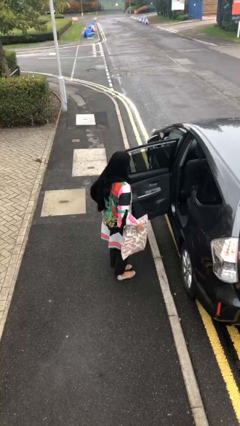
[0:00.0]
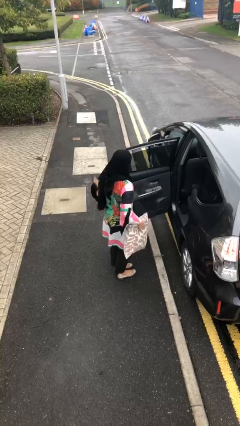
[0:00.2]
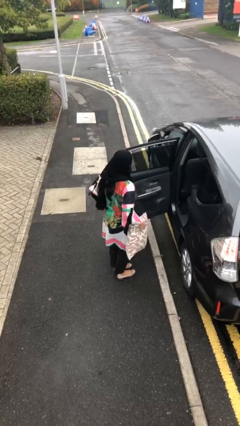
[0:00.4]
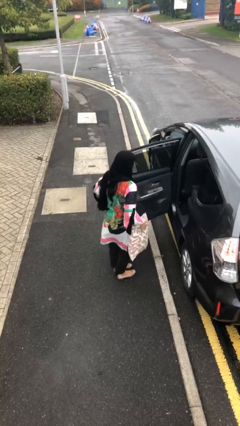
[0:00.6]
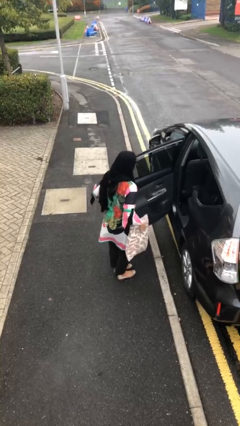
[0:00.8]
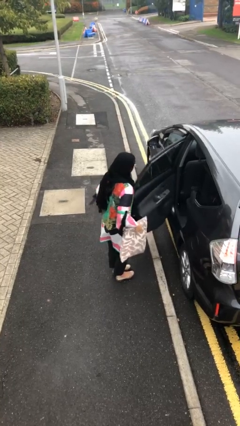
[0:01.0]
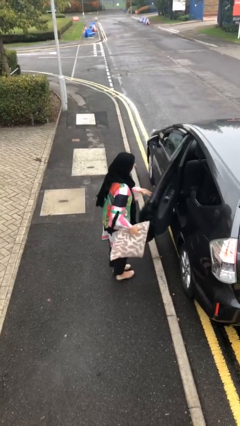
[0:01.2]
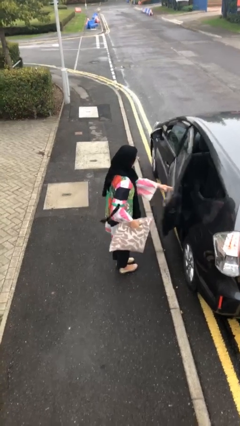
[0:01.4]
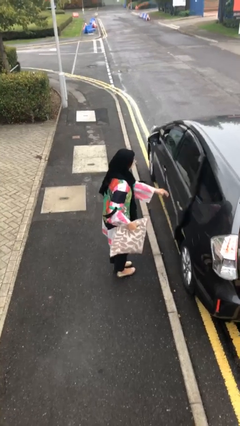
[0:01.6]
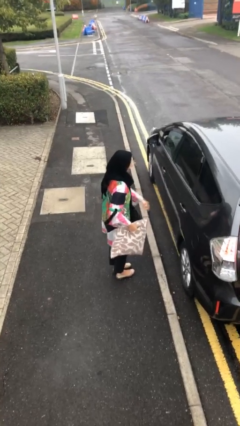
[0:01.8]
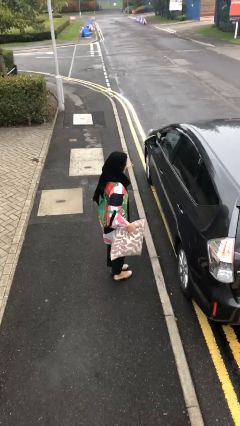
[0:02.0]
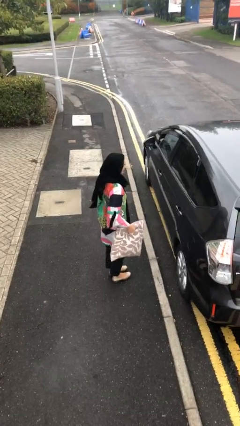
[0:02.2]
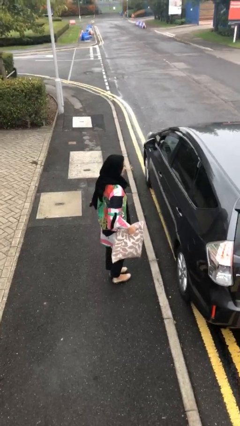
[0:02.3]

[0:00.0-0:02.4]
person closes car door

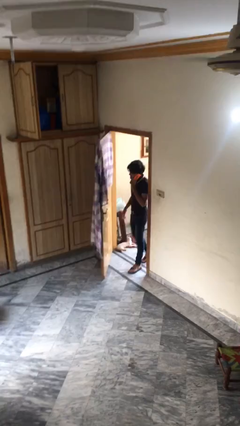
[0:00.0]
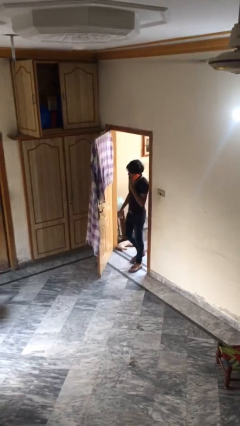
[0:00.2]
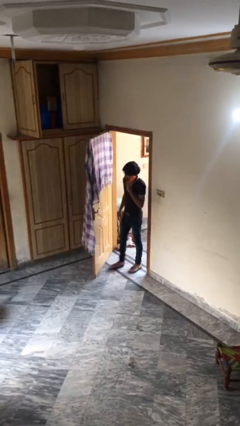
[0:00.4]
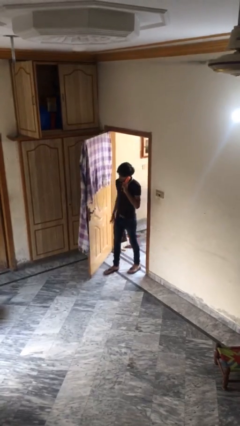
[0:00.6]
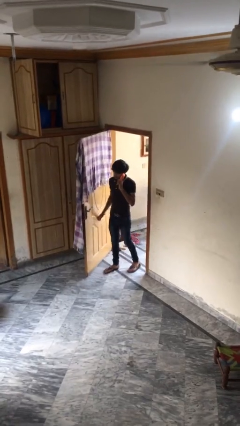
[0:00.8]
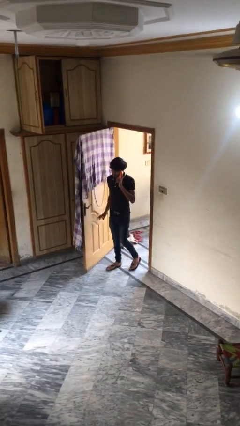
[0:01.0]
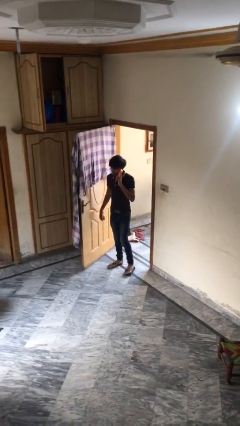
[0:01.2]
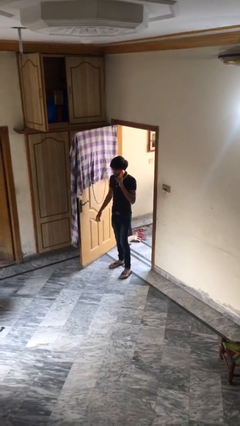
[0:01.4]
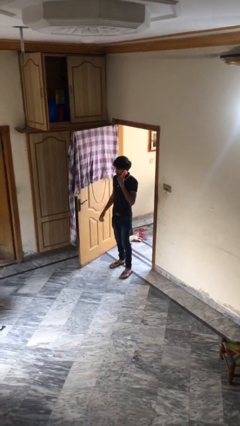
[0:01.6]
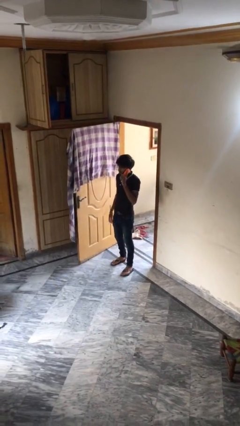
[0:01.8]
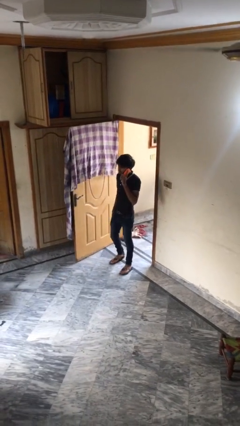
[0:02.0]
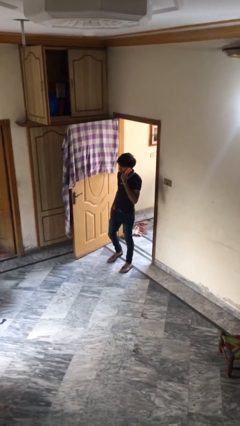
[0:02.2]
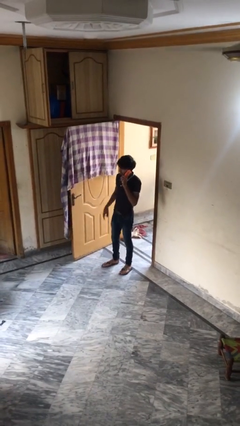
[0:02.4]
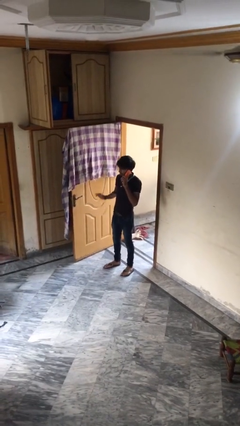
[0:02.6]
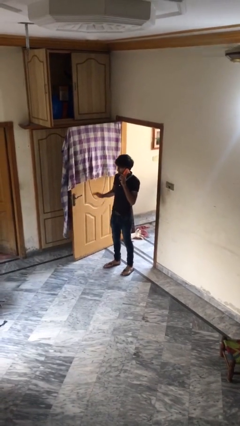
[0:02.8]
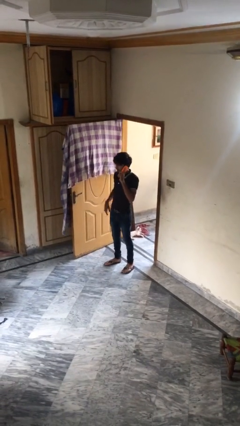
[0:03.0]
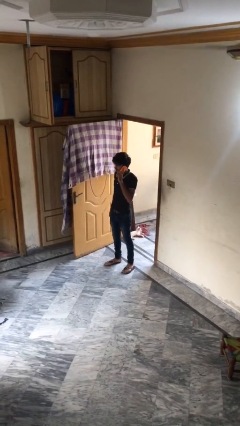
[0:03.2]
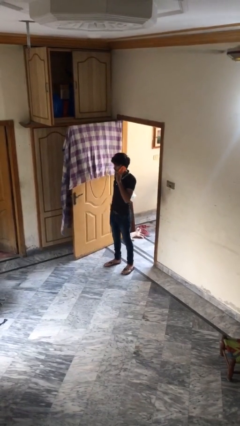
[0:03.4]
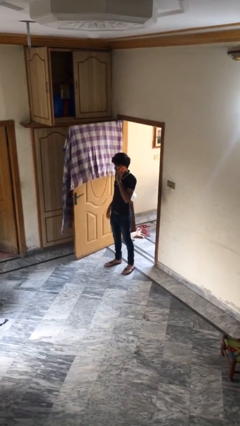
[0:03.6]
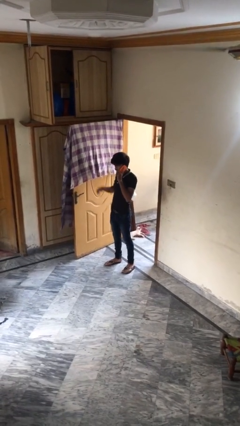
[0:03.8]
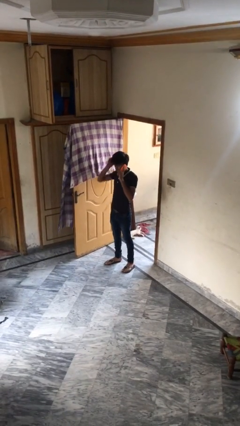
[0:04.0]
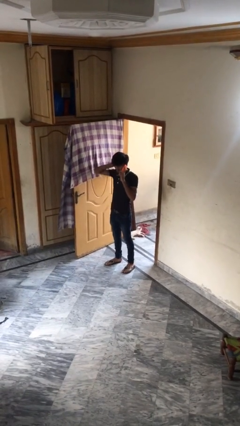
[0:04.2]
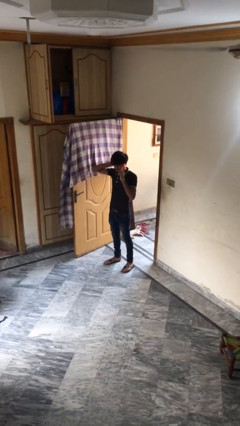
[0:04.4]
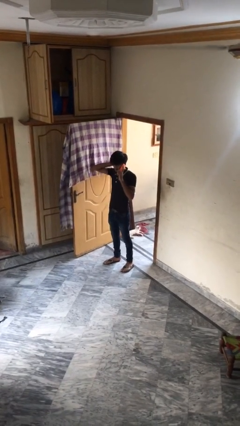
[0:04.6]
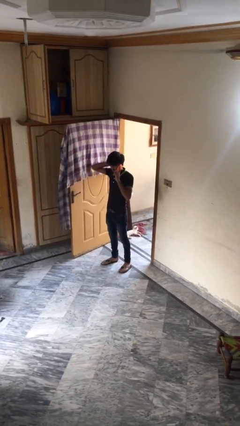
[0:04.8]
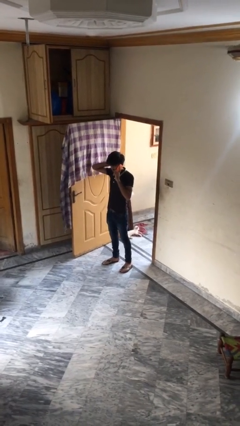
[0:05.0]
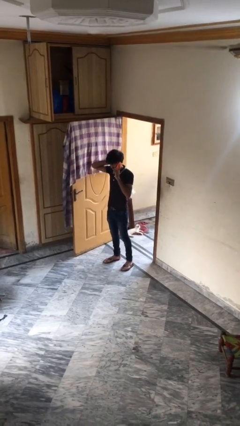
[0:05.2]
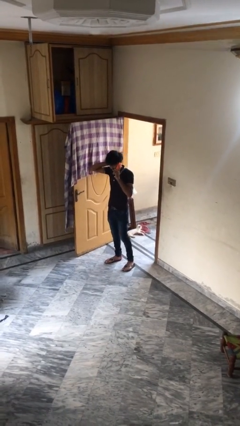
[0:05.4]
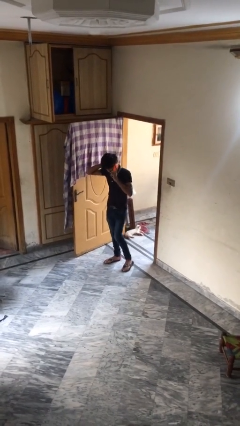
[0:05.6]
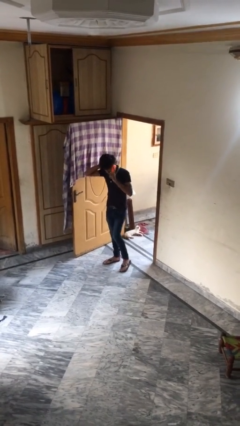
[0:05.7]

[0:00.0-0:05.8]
person enters scene through structure

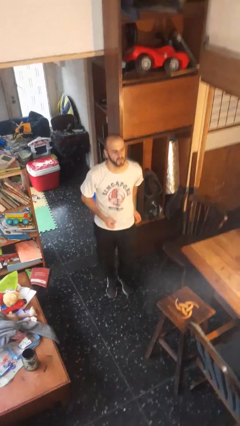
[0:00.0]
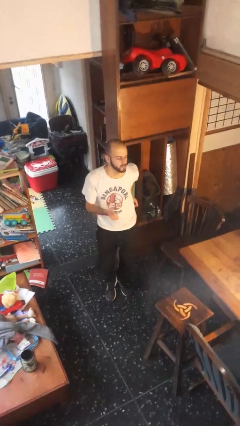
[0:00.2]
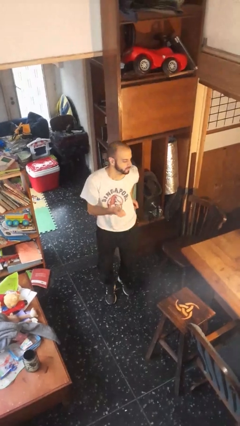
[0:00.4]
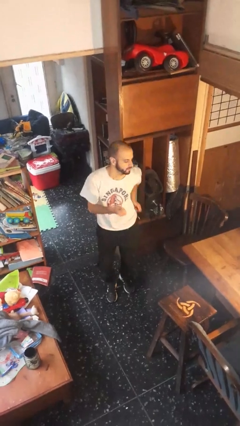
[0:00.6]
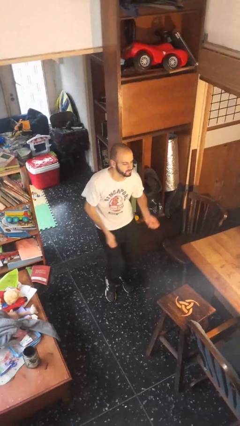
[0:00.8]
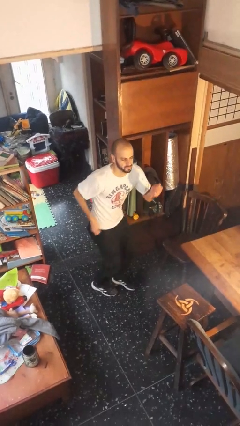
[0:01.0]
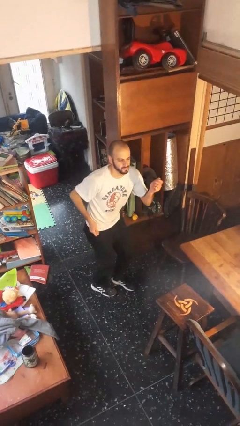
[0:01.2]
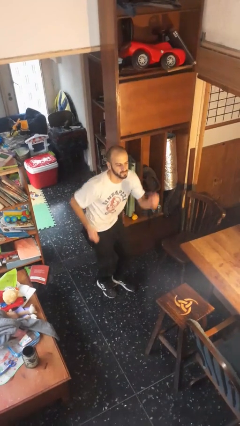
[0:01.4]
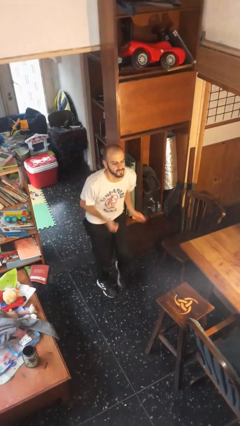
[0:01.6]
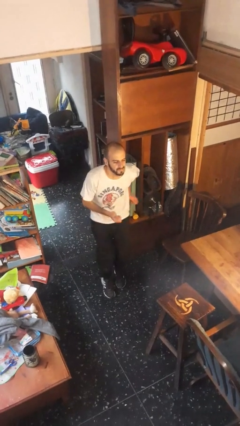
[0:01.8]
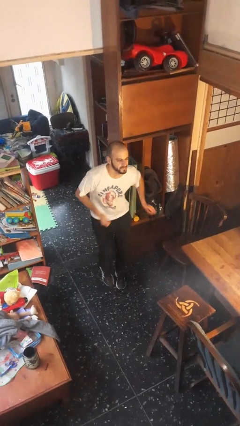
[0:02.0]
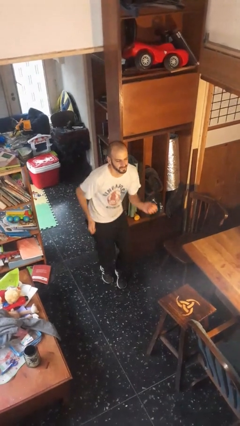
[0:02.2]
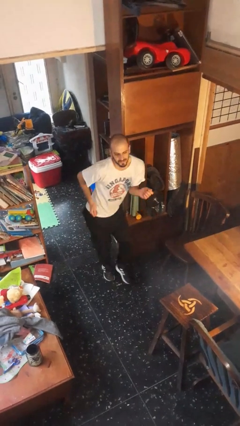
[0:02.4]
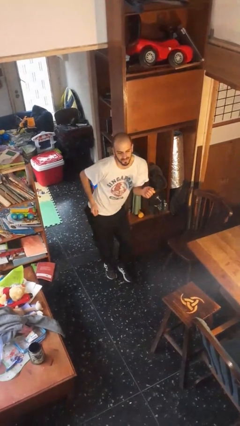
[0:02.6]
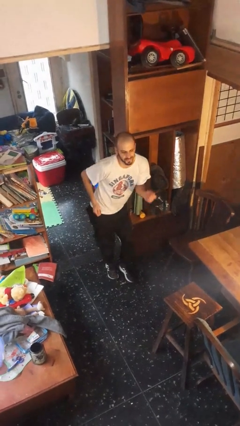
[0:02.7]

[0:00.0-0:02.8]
person dances in place

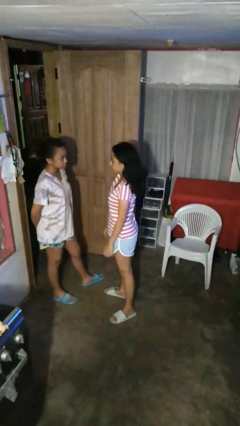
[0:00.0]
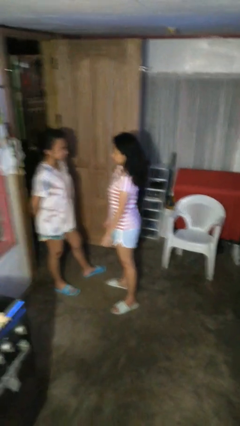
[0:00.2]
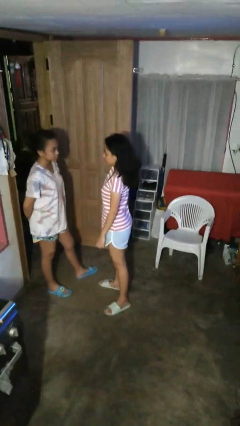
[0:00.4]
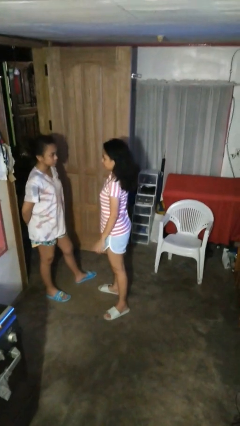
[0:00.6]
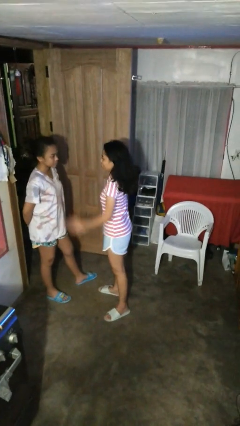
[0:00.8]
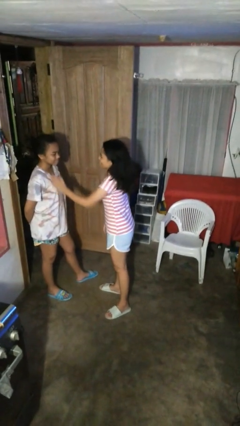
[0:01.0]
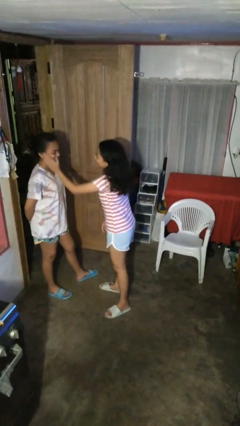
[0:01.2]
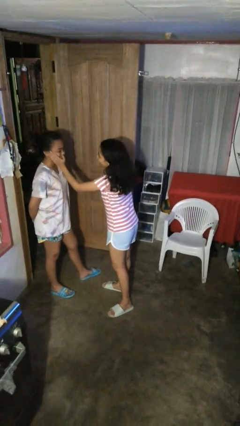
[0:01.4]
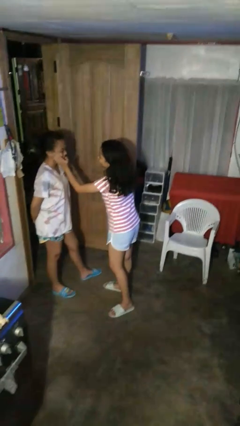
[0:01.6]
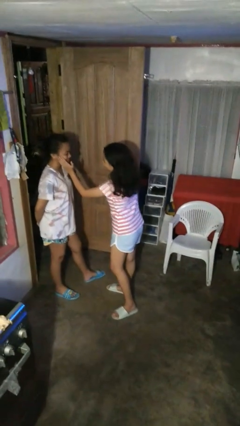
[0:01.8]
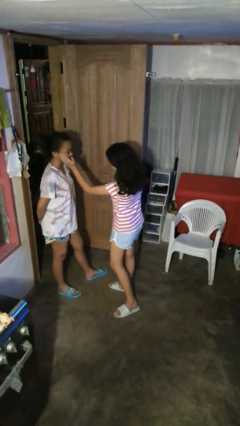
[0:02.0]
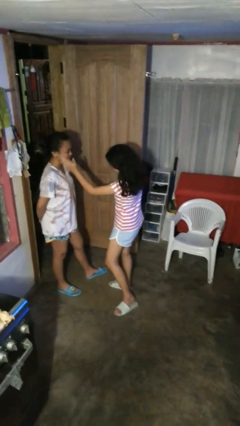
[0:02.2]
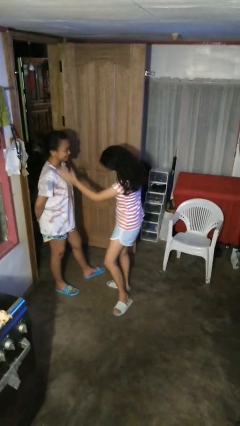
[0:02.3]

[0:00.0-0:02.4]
person touches face of person

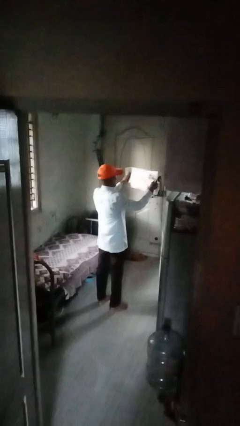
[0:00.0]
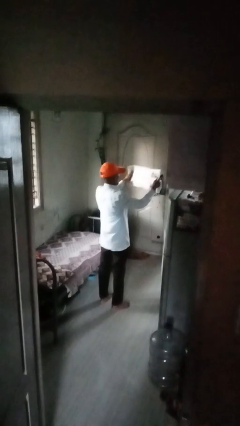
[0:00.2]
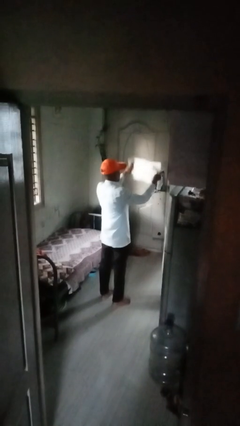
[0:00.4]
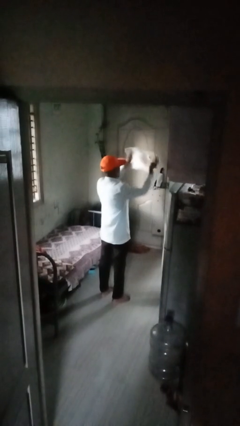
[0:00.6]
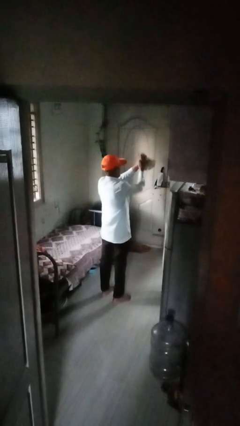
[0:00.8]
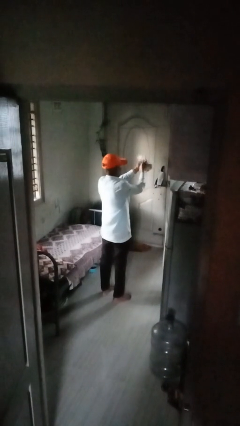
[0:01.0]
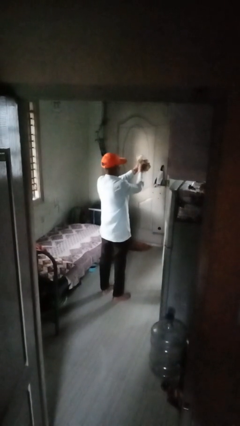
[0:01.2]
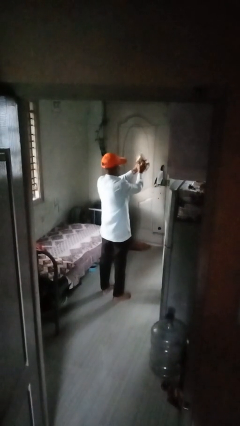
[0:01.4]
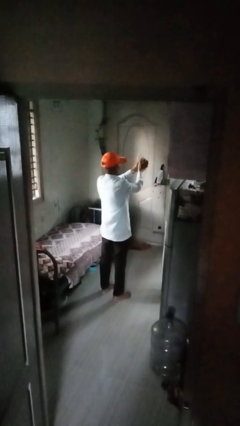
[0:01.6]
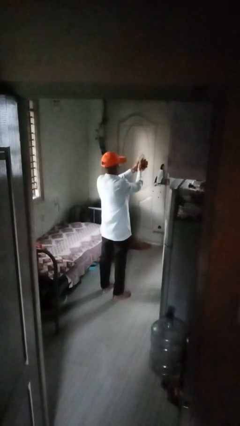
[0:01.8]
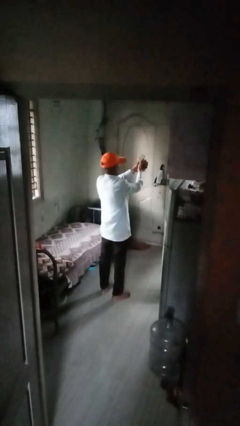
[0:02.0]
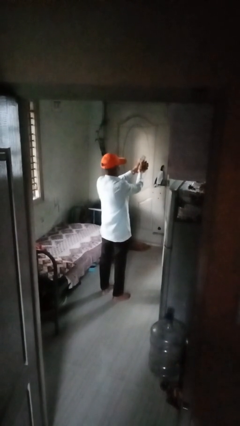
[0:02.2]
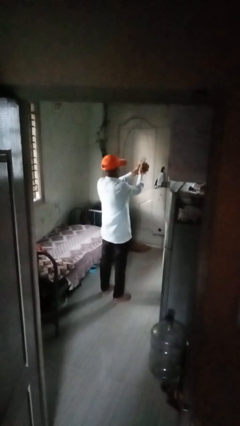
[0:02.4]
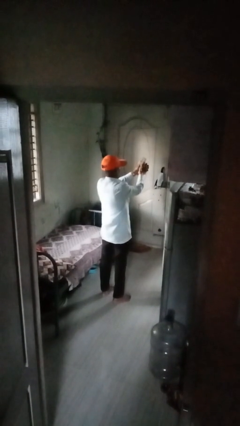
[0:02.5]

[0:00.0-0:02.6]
person crumples paper

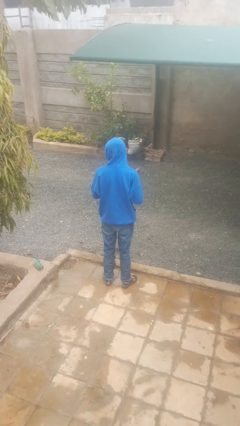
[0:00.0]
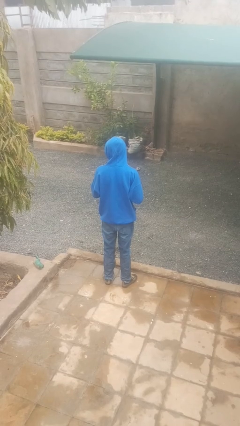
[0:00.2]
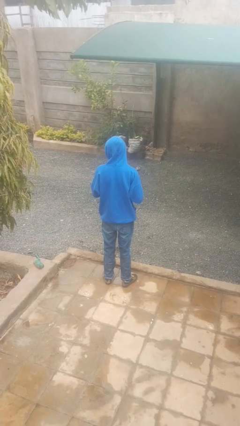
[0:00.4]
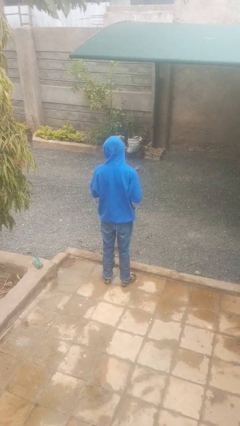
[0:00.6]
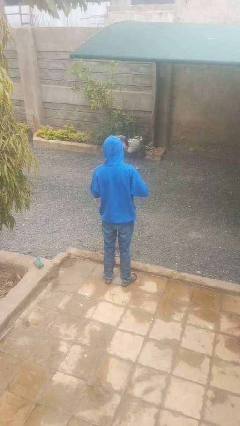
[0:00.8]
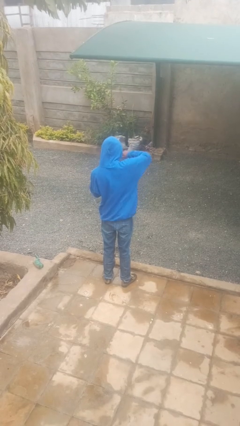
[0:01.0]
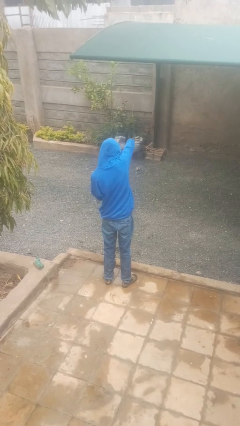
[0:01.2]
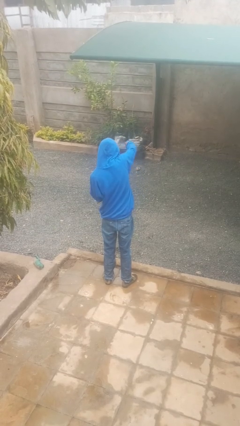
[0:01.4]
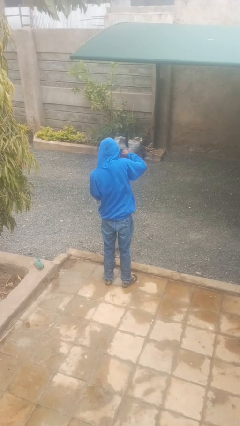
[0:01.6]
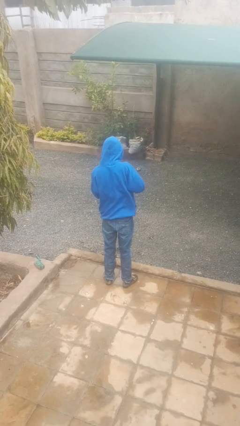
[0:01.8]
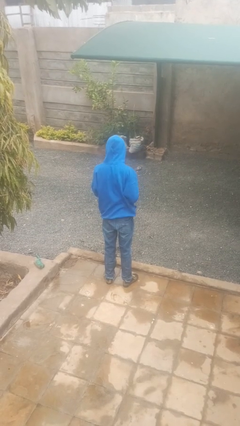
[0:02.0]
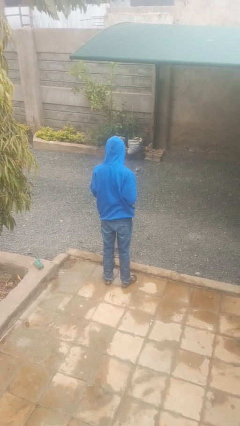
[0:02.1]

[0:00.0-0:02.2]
person punches
